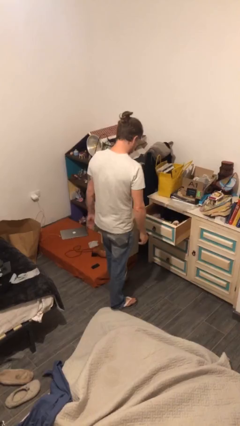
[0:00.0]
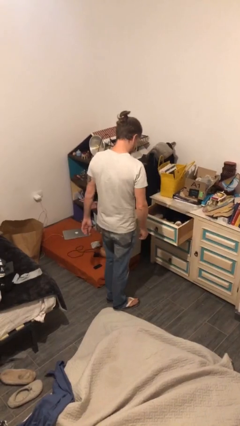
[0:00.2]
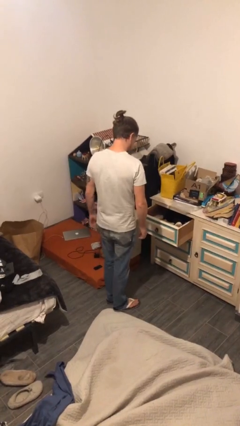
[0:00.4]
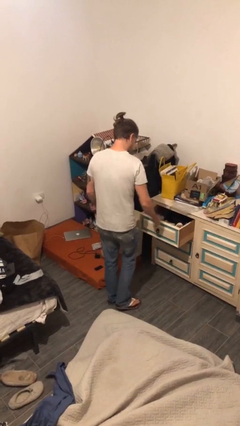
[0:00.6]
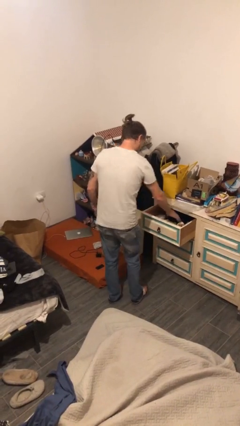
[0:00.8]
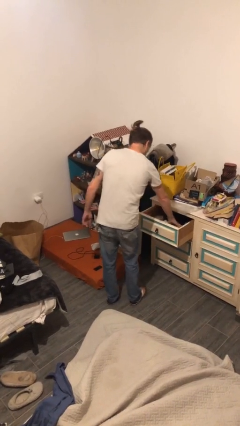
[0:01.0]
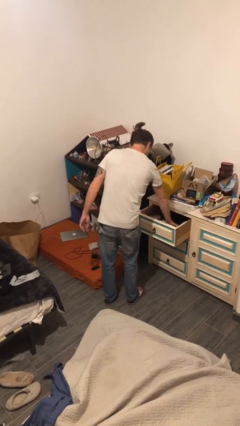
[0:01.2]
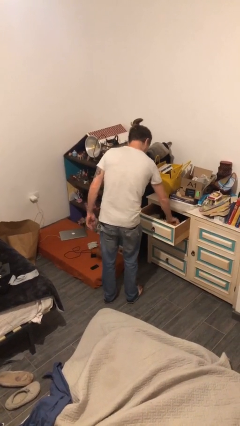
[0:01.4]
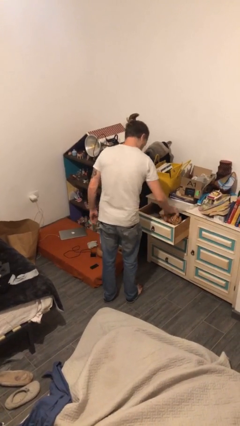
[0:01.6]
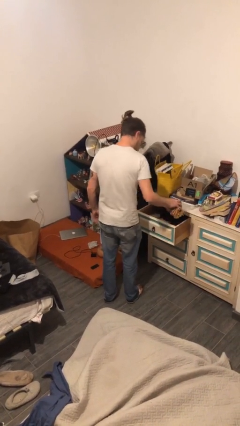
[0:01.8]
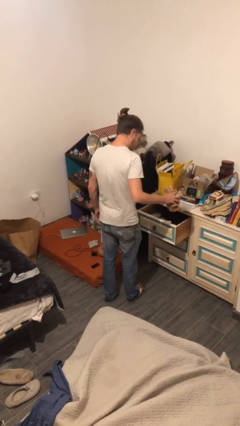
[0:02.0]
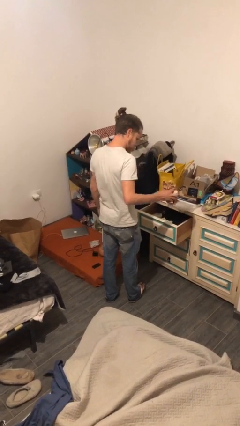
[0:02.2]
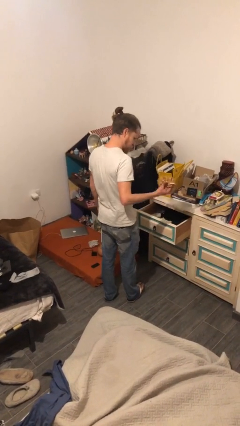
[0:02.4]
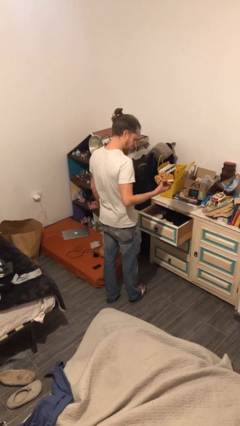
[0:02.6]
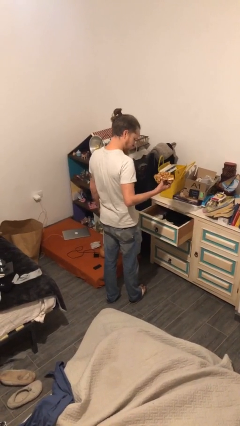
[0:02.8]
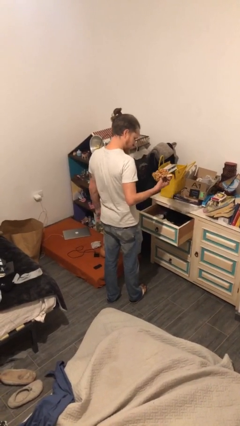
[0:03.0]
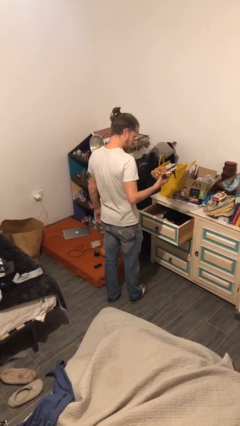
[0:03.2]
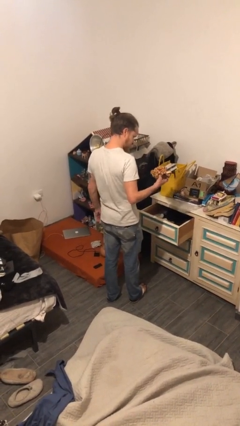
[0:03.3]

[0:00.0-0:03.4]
person picks up object from cabinet

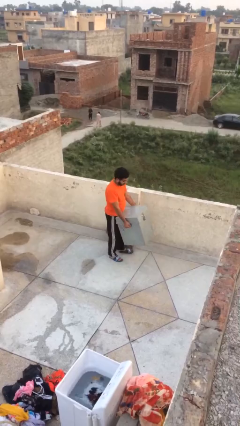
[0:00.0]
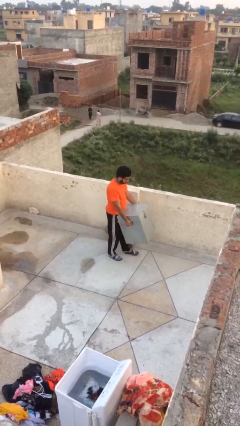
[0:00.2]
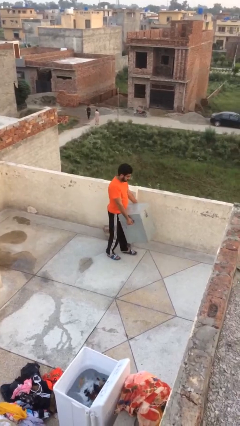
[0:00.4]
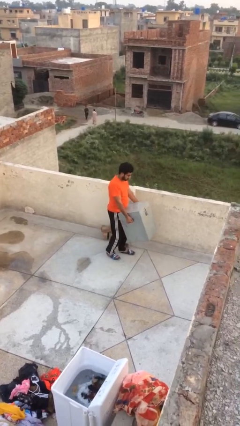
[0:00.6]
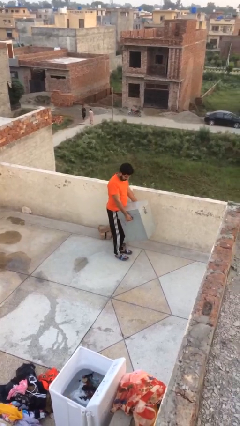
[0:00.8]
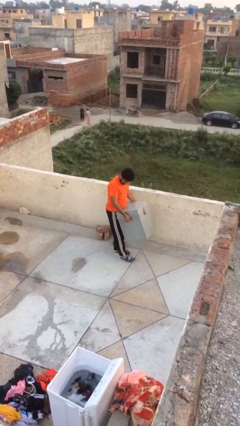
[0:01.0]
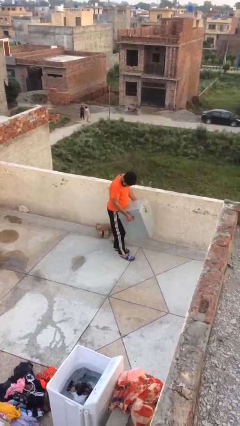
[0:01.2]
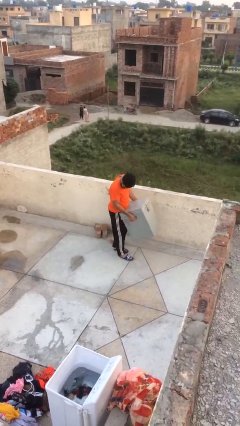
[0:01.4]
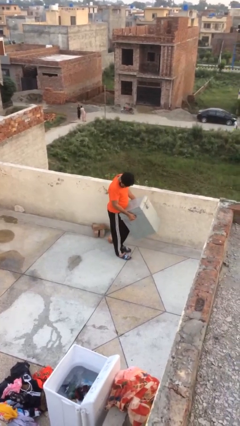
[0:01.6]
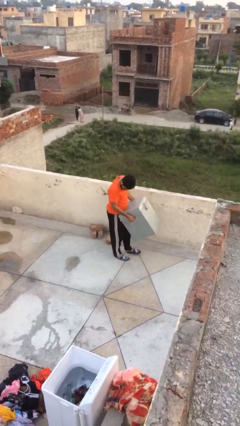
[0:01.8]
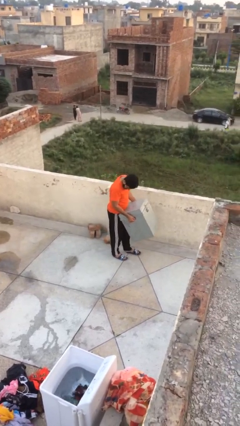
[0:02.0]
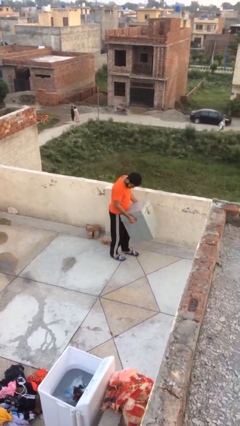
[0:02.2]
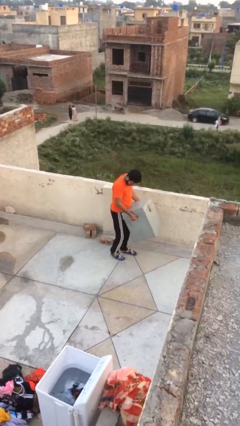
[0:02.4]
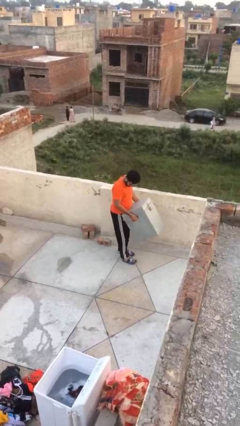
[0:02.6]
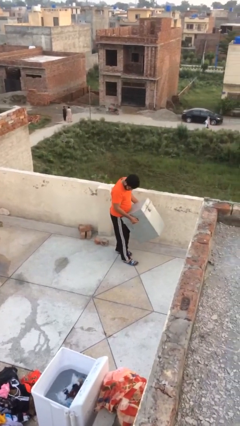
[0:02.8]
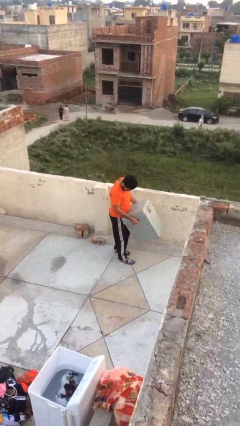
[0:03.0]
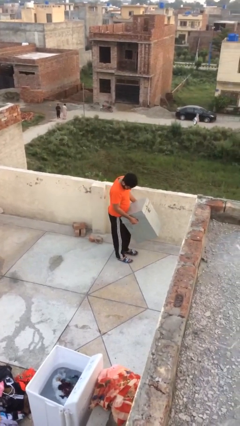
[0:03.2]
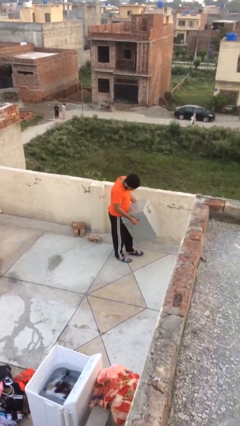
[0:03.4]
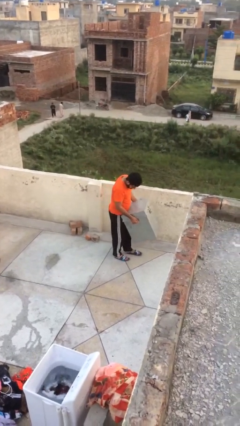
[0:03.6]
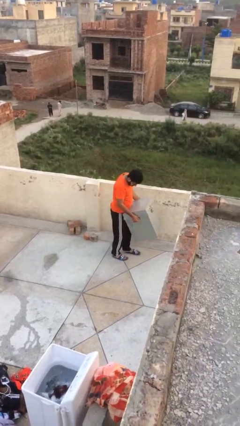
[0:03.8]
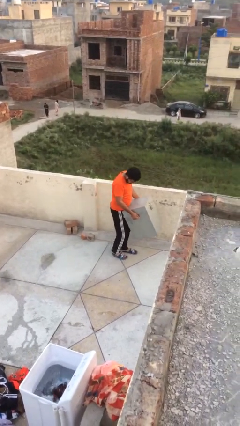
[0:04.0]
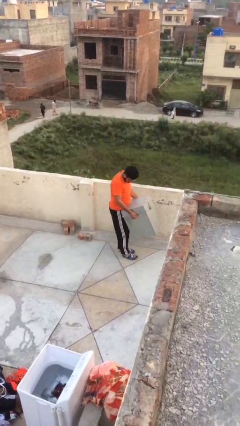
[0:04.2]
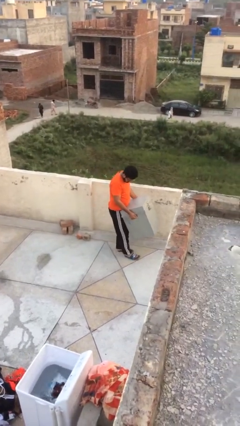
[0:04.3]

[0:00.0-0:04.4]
person carries heavy object

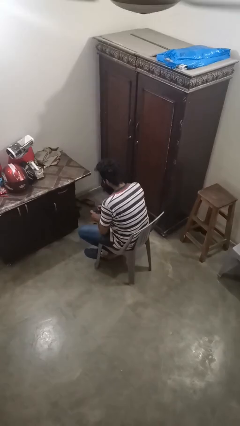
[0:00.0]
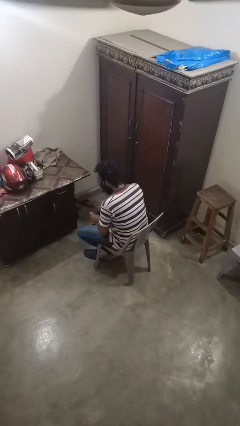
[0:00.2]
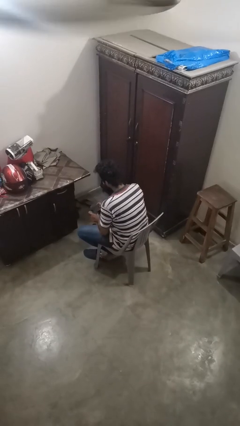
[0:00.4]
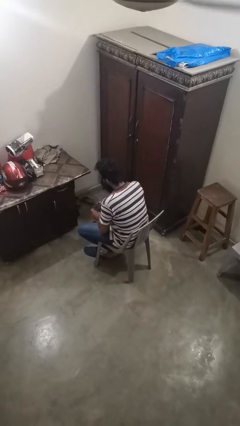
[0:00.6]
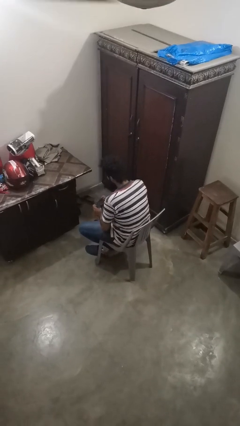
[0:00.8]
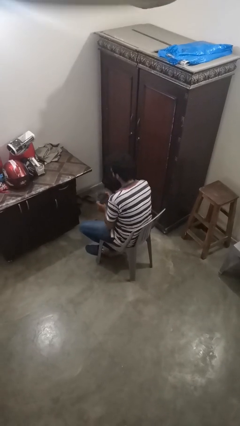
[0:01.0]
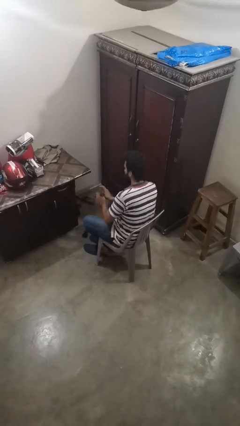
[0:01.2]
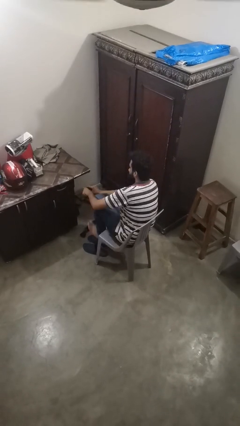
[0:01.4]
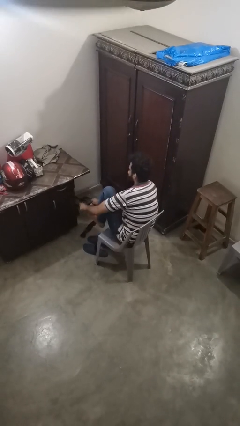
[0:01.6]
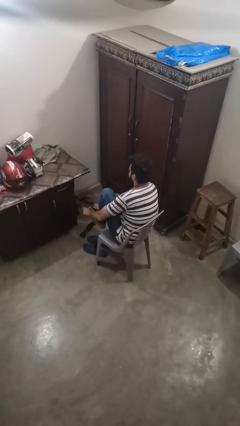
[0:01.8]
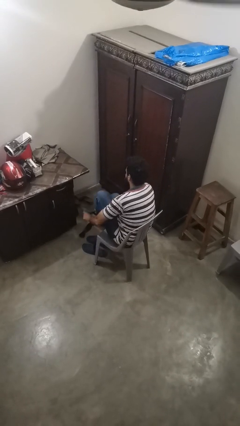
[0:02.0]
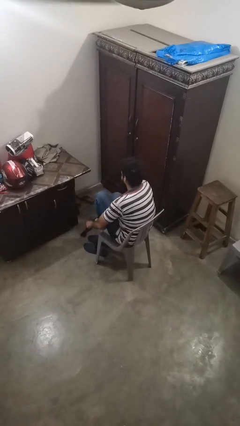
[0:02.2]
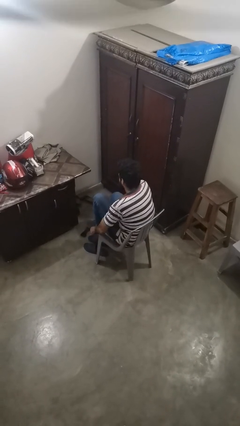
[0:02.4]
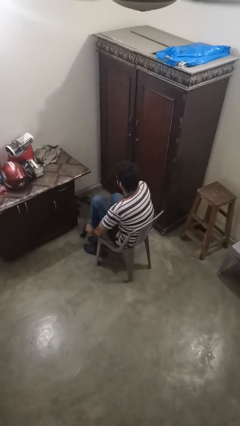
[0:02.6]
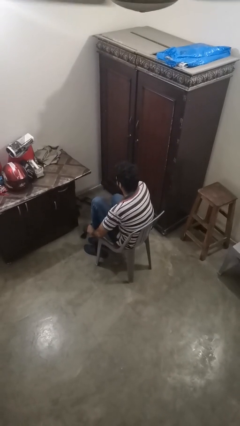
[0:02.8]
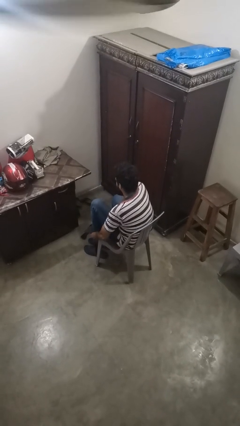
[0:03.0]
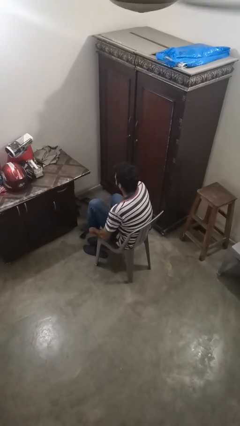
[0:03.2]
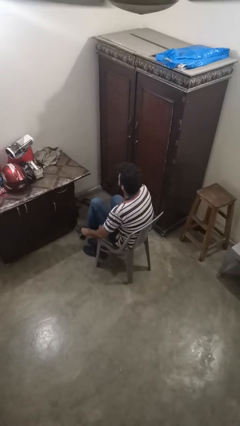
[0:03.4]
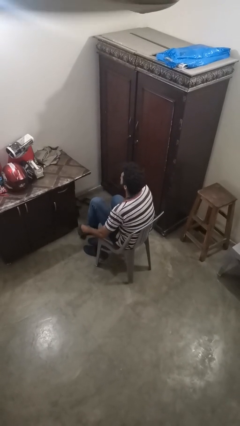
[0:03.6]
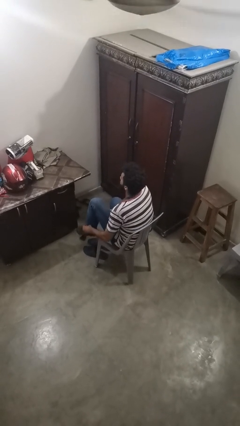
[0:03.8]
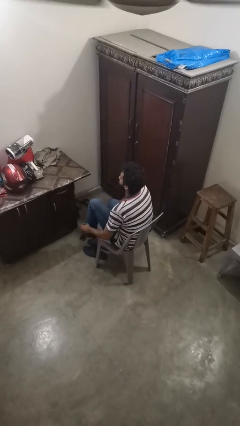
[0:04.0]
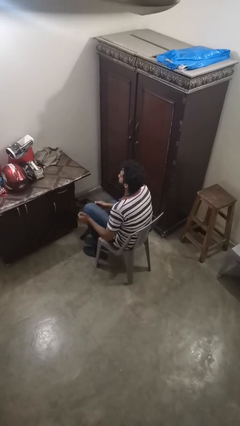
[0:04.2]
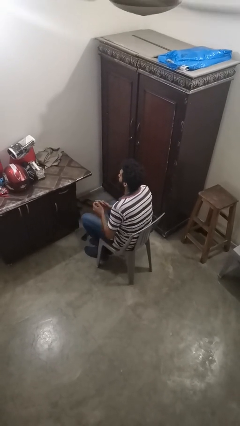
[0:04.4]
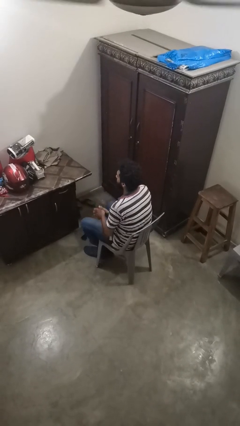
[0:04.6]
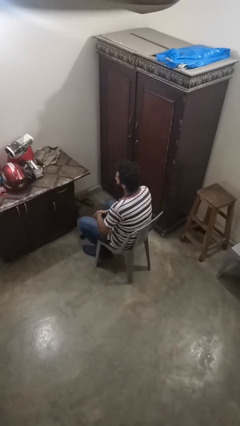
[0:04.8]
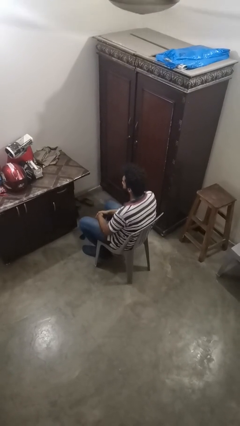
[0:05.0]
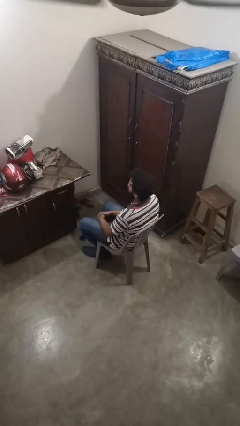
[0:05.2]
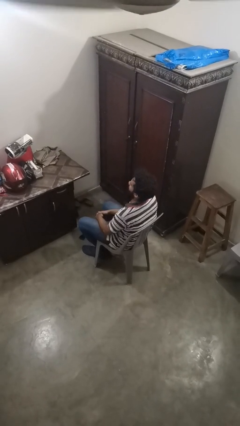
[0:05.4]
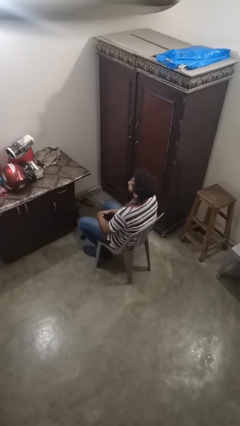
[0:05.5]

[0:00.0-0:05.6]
person puts on socks

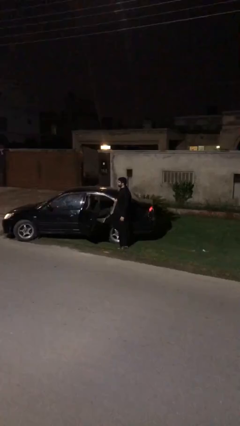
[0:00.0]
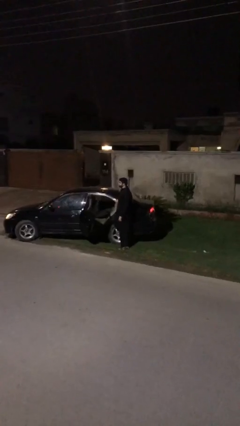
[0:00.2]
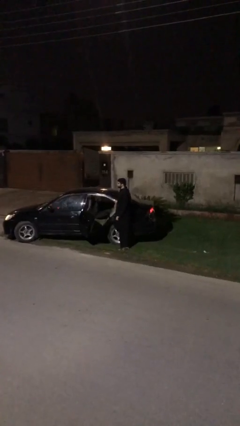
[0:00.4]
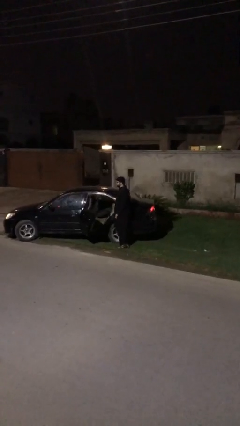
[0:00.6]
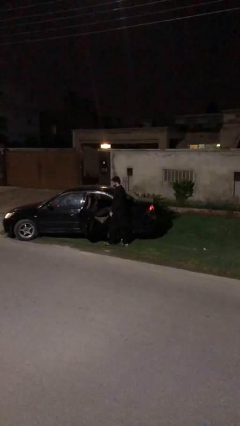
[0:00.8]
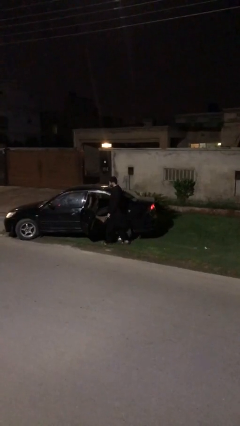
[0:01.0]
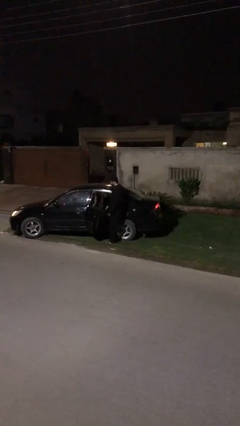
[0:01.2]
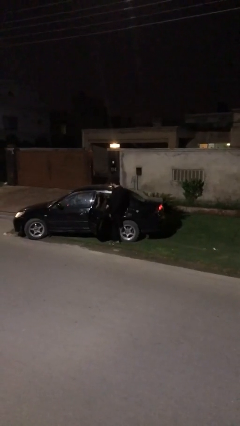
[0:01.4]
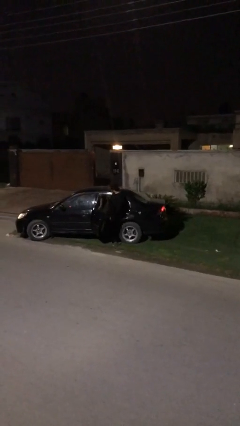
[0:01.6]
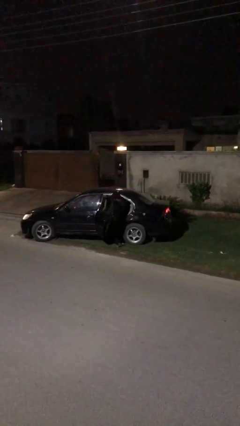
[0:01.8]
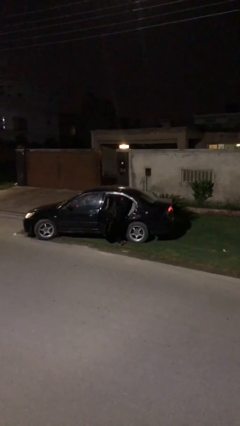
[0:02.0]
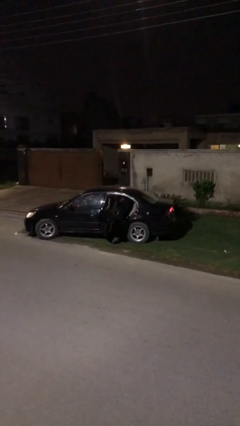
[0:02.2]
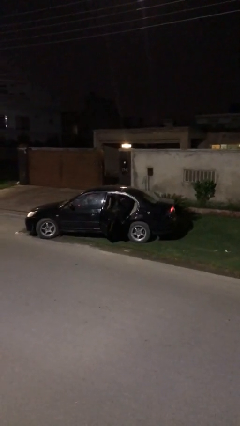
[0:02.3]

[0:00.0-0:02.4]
person enters car

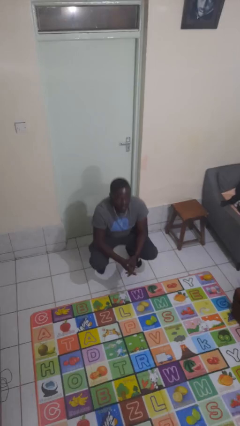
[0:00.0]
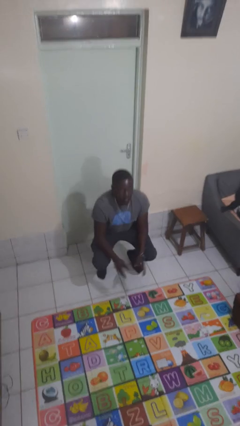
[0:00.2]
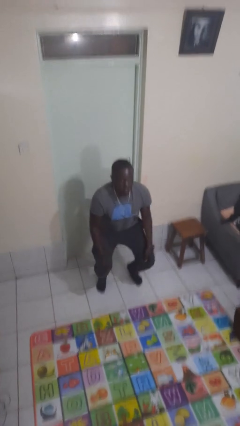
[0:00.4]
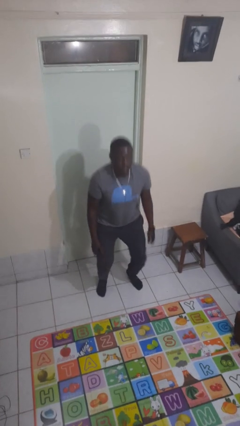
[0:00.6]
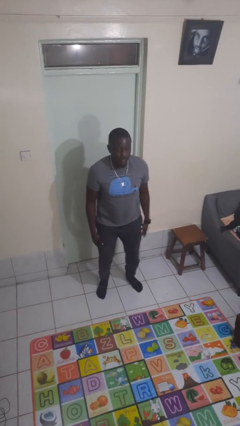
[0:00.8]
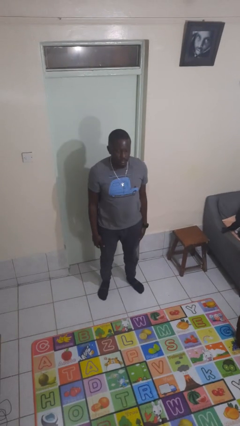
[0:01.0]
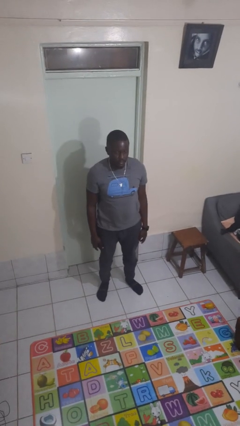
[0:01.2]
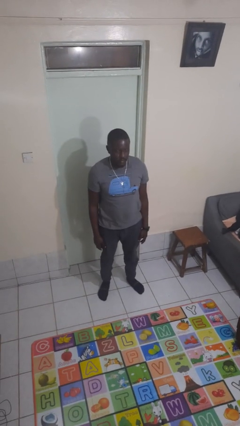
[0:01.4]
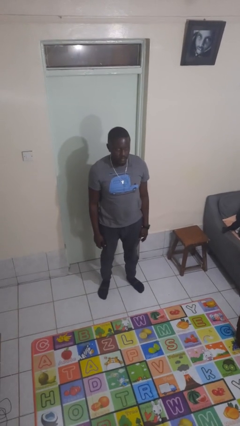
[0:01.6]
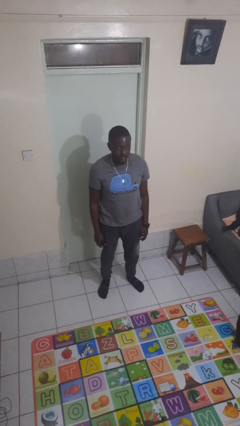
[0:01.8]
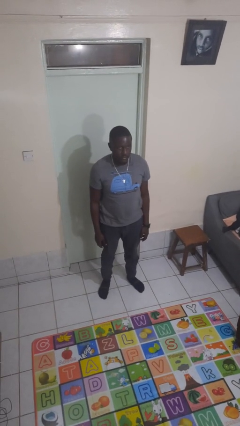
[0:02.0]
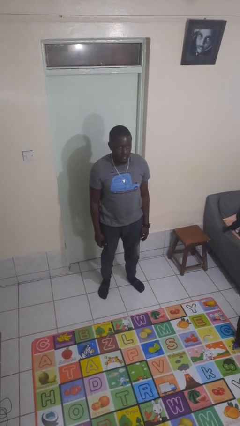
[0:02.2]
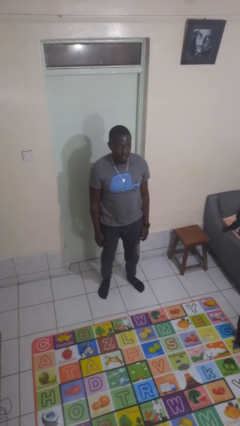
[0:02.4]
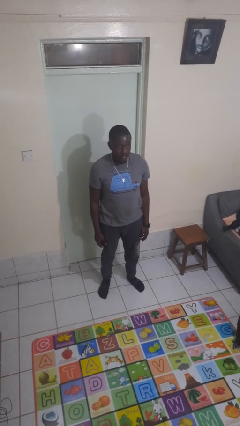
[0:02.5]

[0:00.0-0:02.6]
person stands up
